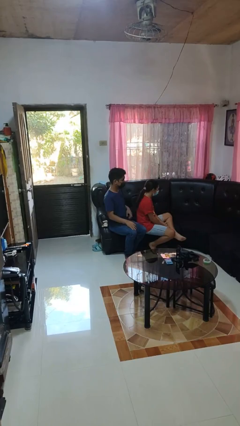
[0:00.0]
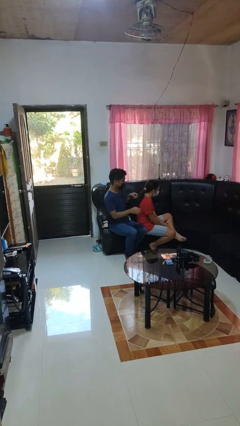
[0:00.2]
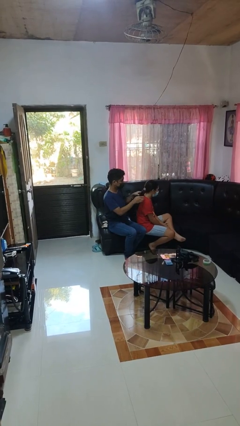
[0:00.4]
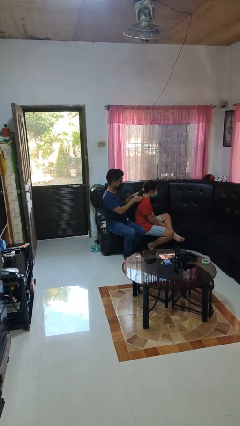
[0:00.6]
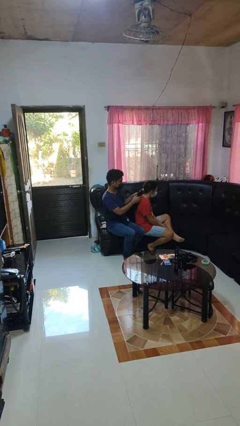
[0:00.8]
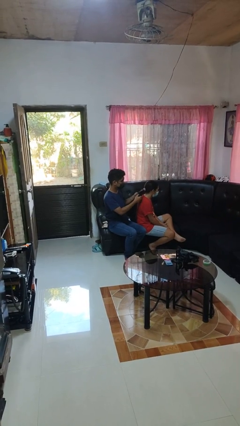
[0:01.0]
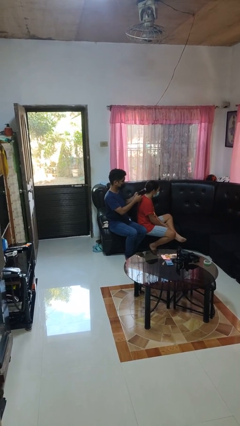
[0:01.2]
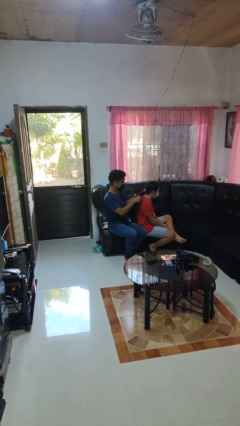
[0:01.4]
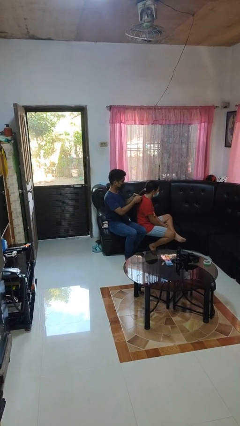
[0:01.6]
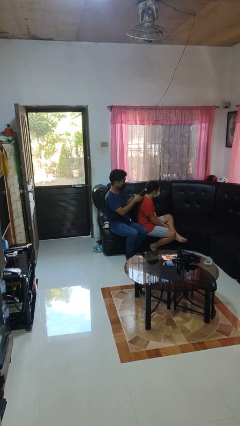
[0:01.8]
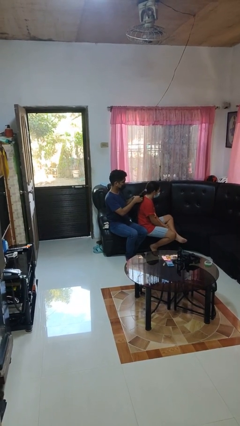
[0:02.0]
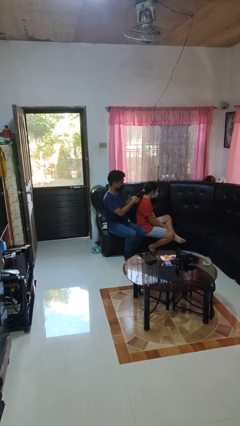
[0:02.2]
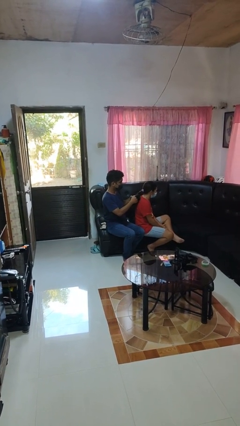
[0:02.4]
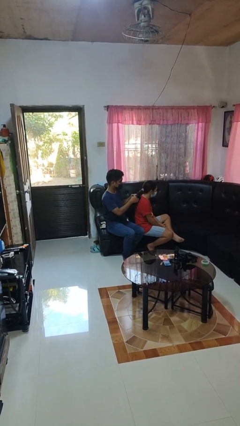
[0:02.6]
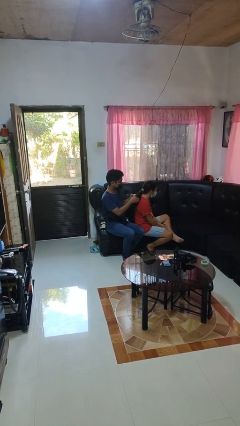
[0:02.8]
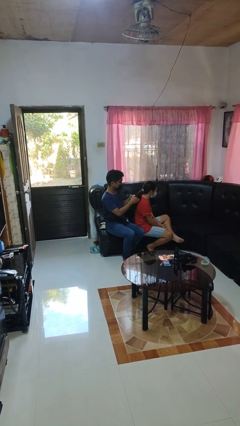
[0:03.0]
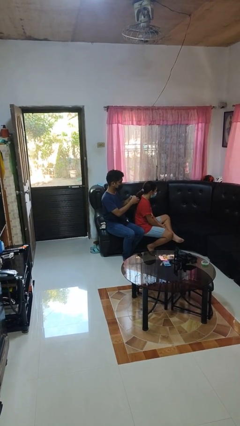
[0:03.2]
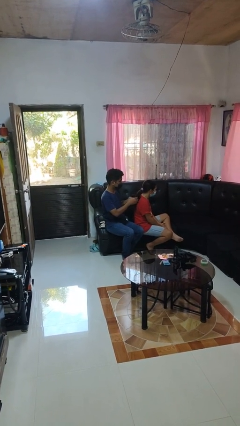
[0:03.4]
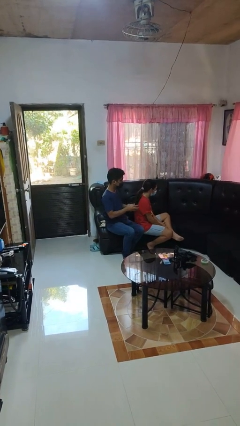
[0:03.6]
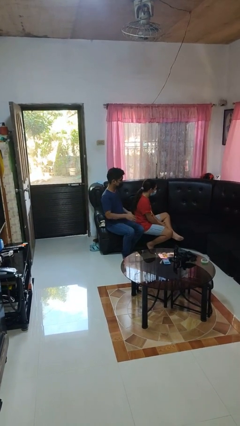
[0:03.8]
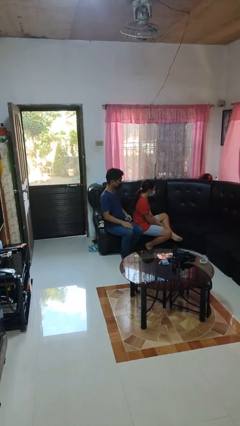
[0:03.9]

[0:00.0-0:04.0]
person braids hair of person

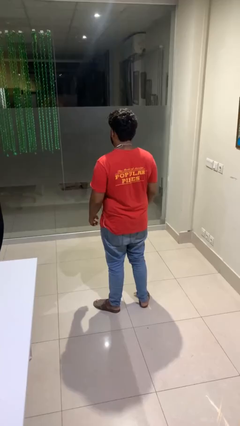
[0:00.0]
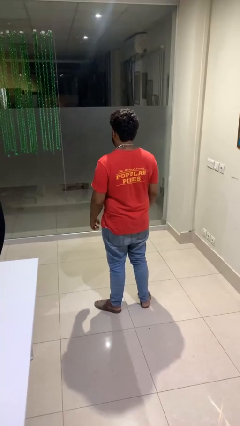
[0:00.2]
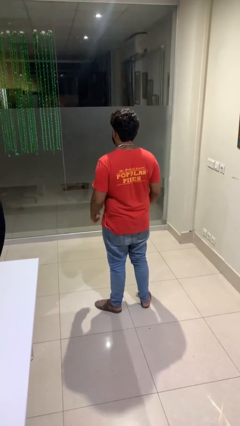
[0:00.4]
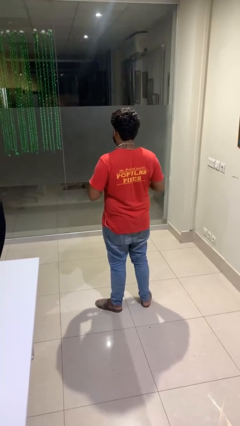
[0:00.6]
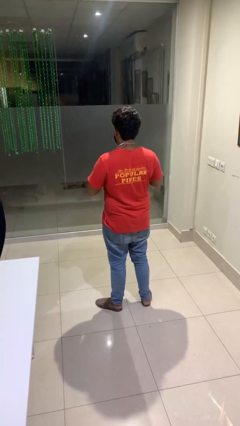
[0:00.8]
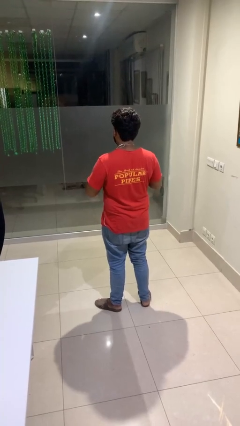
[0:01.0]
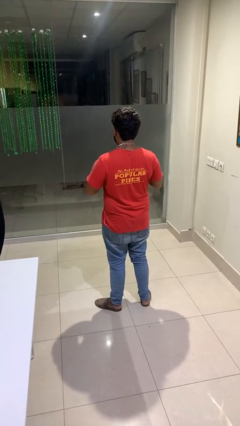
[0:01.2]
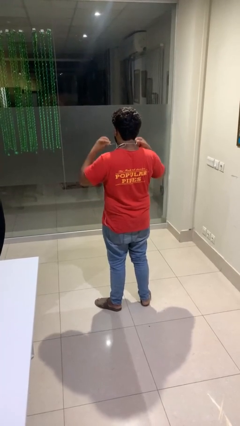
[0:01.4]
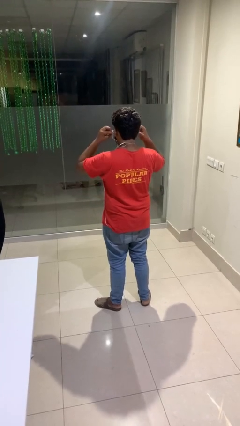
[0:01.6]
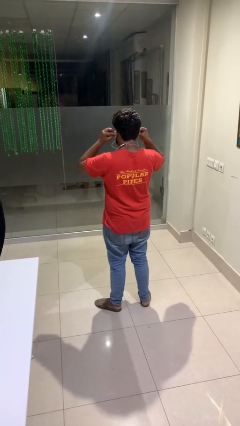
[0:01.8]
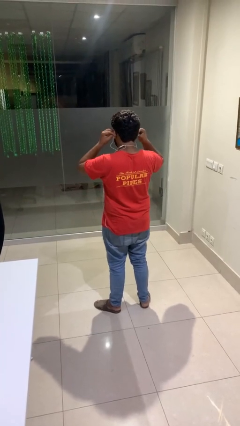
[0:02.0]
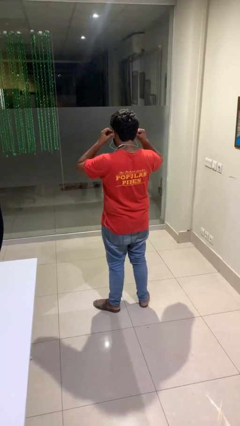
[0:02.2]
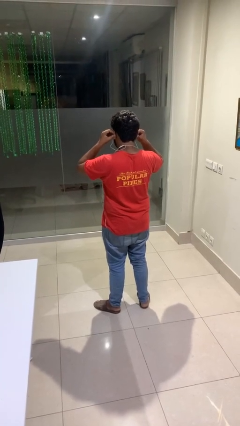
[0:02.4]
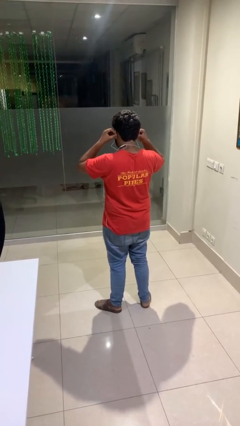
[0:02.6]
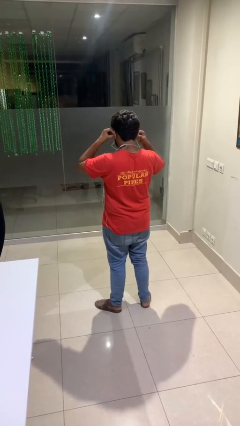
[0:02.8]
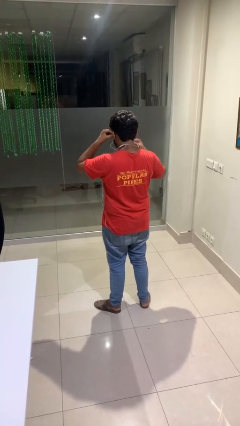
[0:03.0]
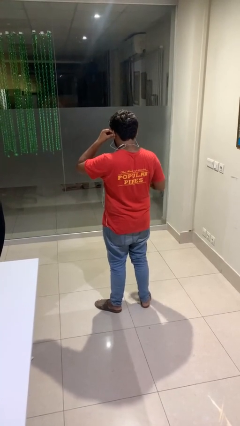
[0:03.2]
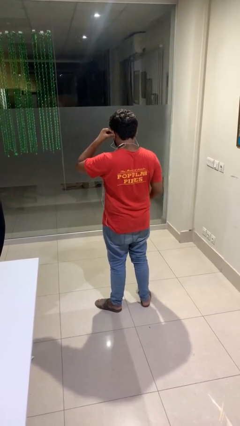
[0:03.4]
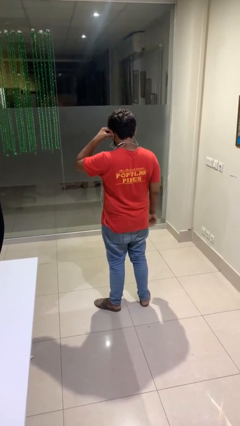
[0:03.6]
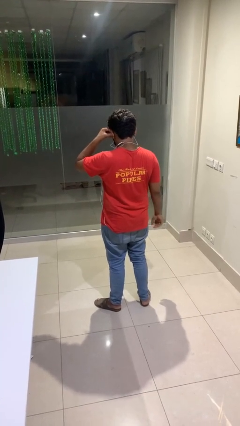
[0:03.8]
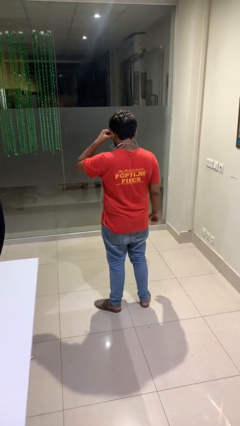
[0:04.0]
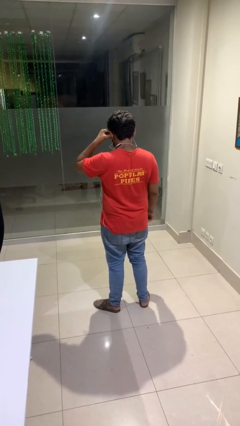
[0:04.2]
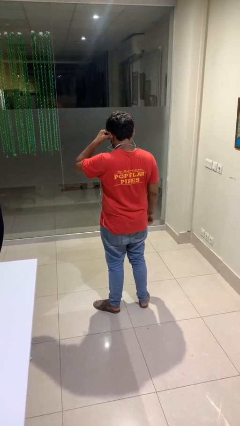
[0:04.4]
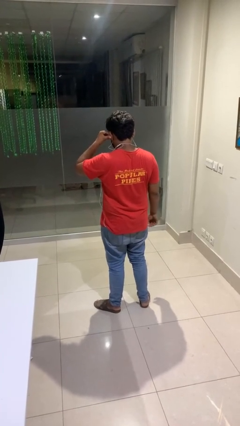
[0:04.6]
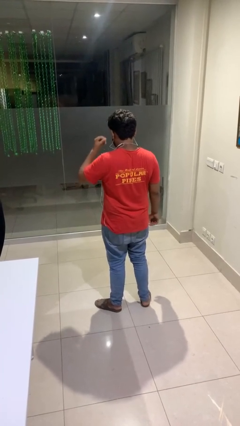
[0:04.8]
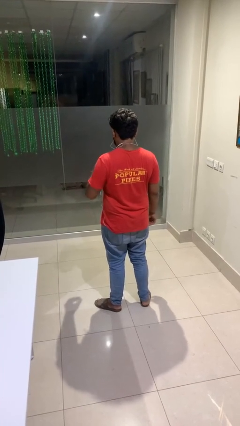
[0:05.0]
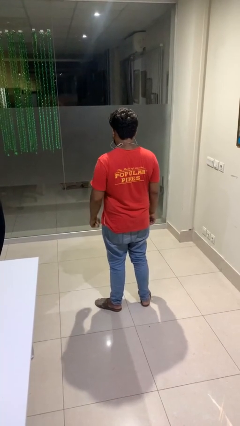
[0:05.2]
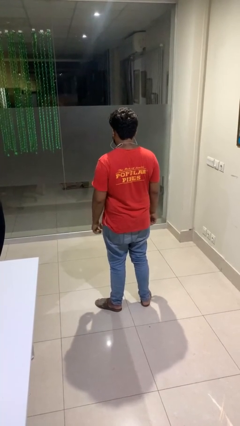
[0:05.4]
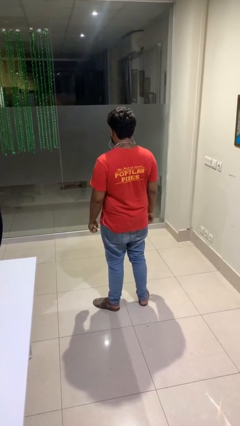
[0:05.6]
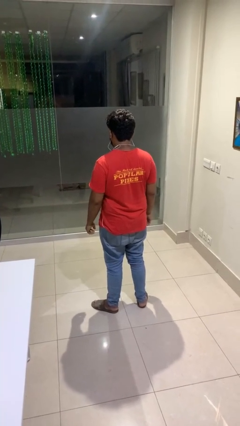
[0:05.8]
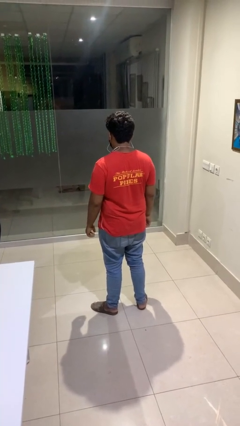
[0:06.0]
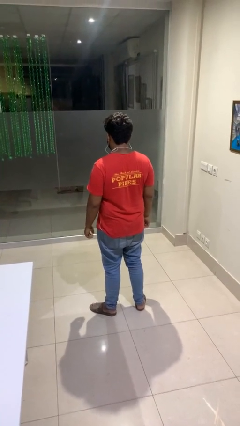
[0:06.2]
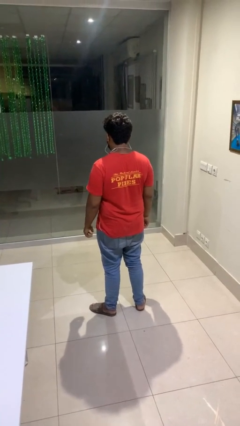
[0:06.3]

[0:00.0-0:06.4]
person puts on headphones

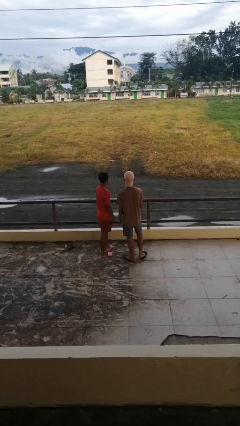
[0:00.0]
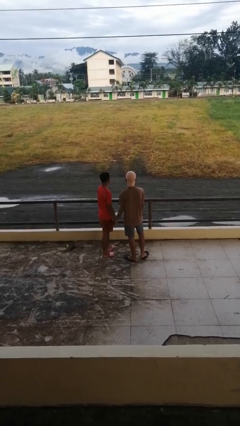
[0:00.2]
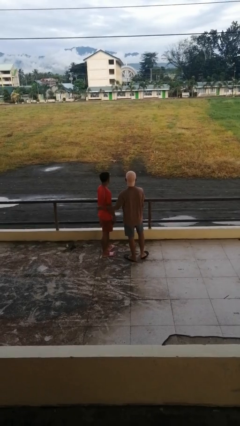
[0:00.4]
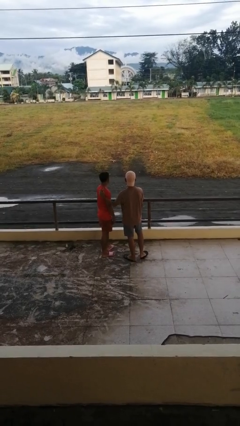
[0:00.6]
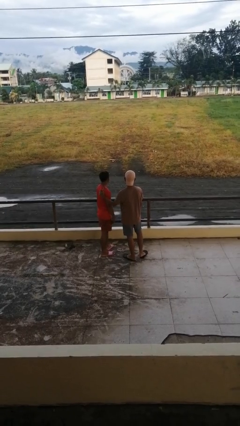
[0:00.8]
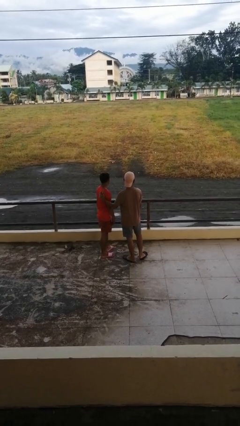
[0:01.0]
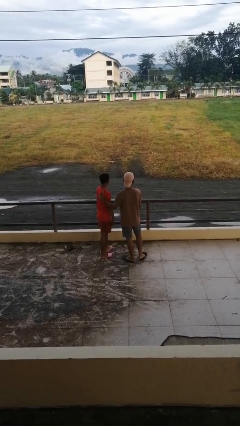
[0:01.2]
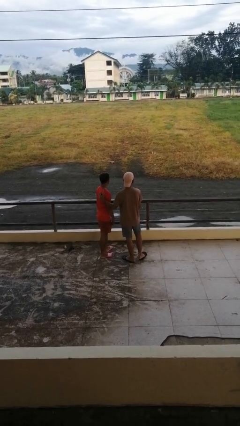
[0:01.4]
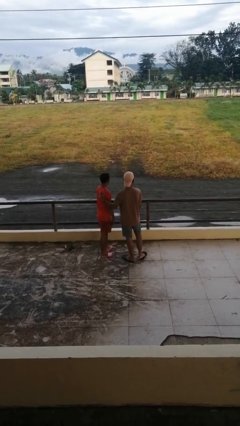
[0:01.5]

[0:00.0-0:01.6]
person touches back of person

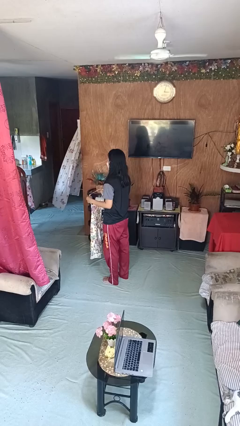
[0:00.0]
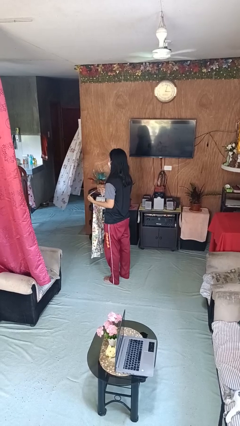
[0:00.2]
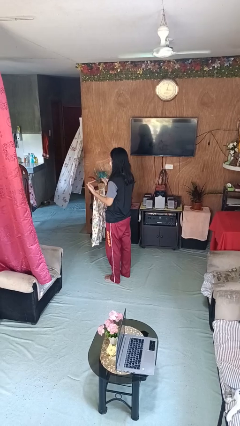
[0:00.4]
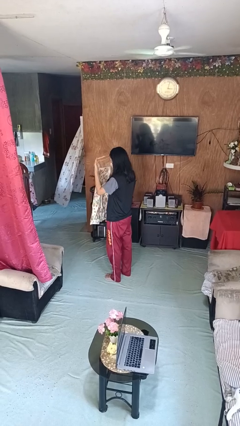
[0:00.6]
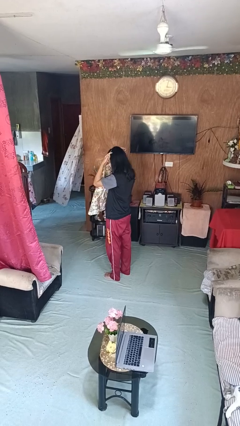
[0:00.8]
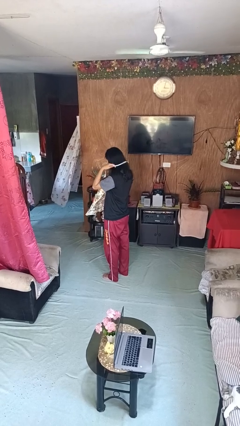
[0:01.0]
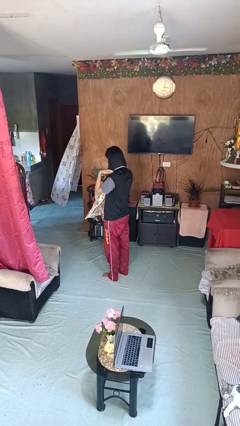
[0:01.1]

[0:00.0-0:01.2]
person puts on apron

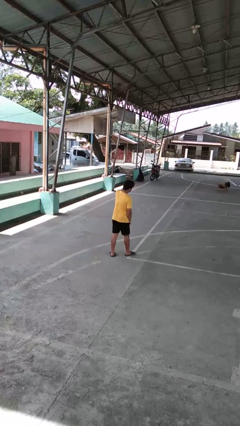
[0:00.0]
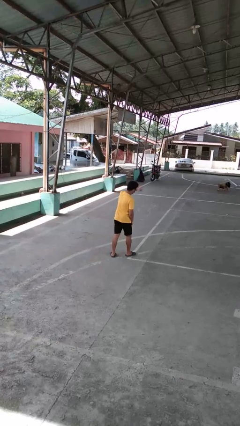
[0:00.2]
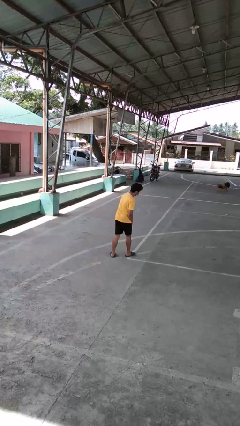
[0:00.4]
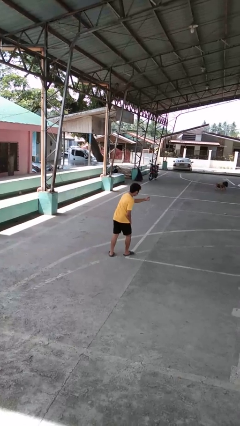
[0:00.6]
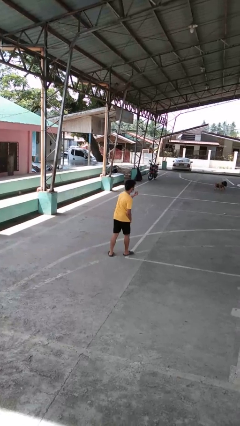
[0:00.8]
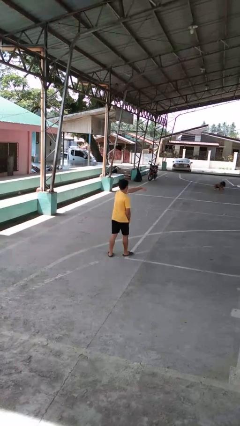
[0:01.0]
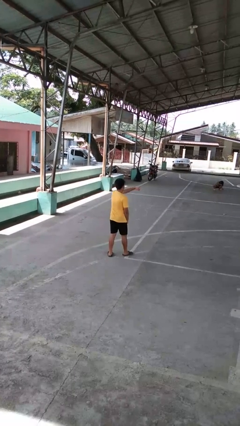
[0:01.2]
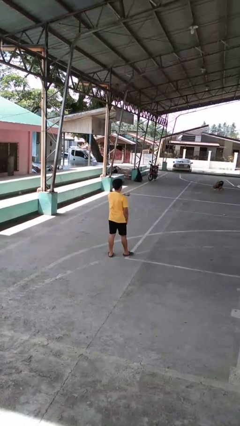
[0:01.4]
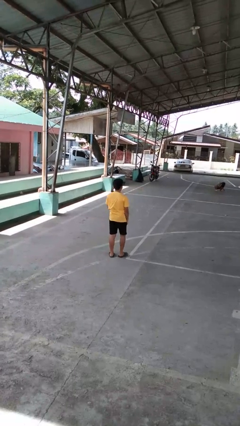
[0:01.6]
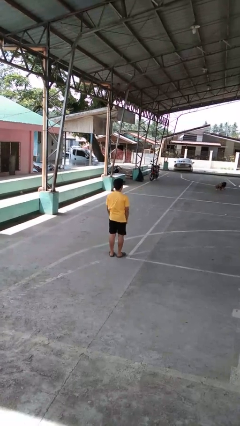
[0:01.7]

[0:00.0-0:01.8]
person punches

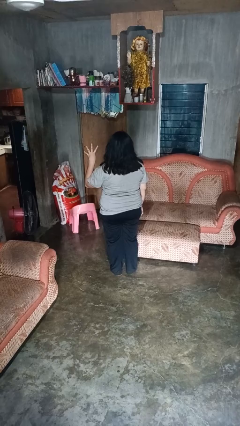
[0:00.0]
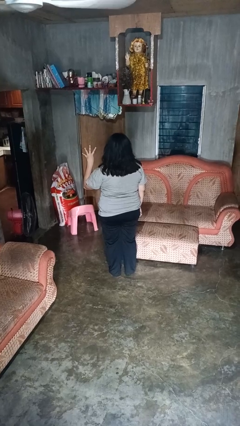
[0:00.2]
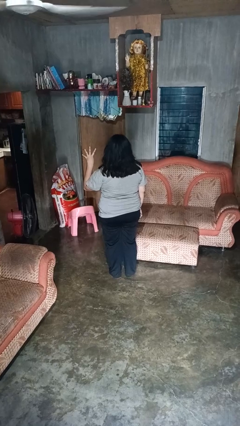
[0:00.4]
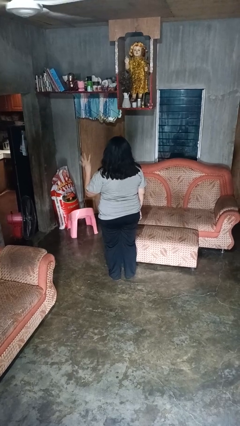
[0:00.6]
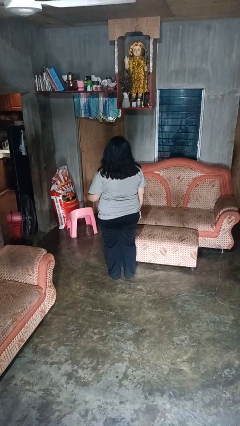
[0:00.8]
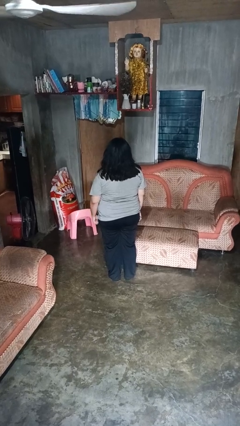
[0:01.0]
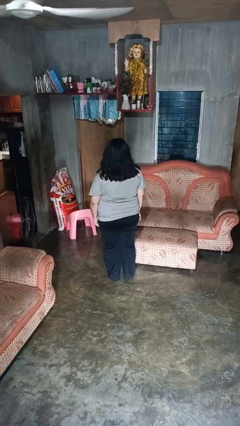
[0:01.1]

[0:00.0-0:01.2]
person gestures number four

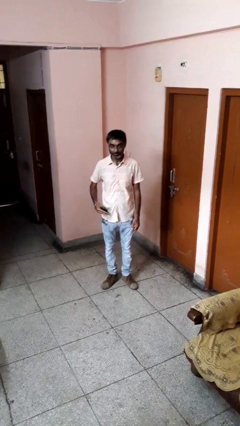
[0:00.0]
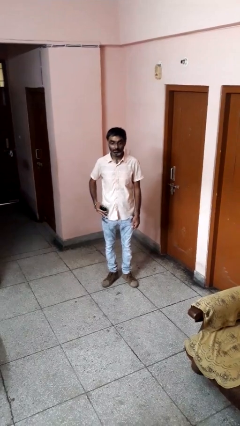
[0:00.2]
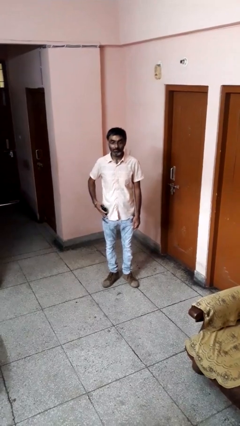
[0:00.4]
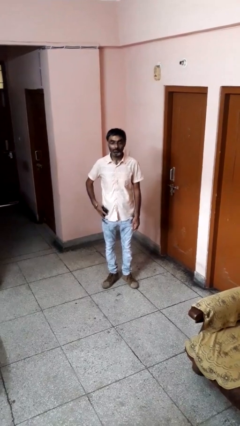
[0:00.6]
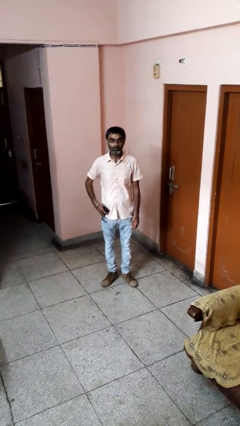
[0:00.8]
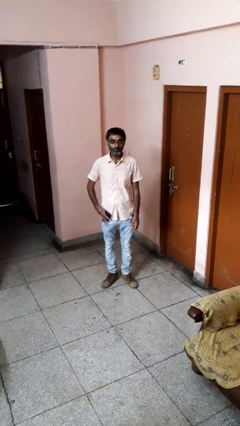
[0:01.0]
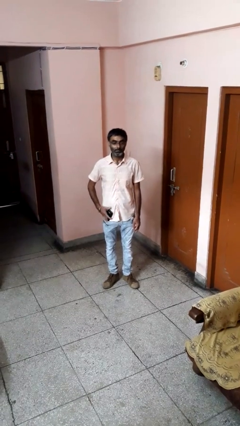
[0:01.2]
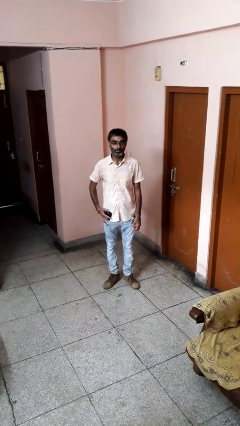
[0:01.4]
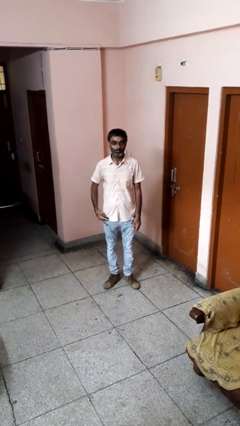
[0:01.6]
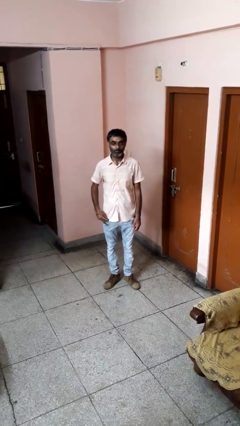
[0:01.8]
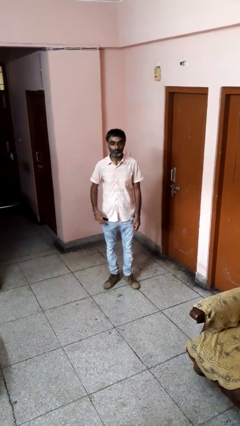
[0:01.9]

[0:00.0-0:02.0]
person puts phone into pocket
